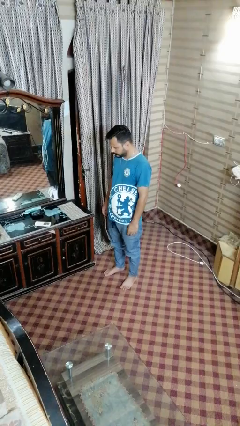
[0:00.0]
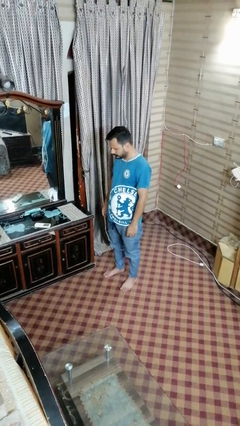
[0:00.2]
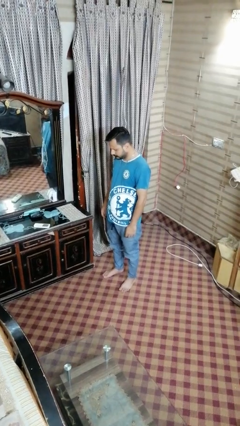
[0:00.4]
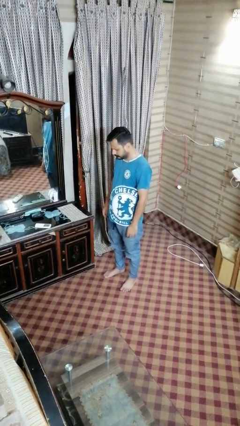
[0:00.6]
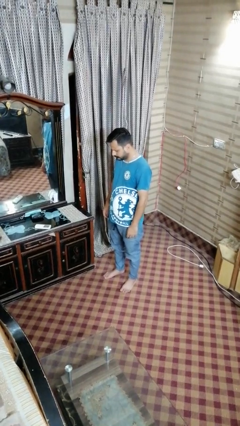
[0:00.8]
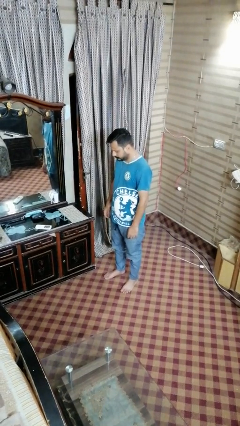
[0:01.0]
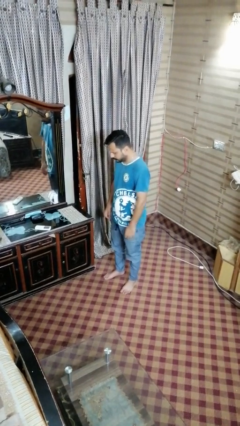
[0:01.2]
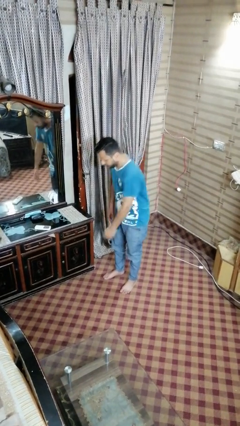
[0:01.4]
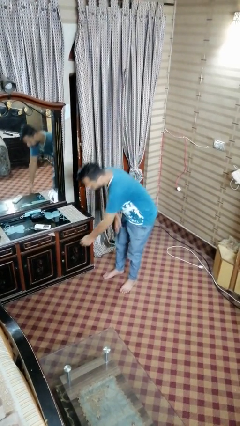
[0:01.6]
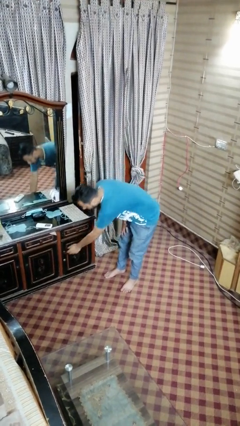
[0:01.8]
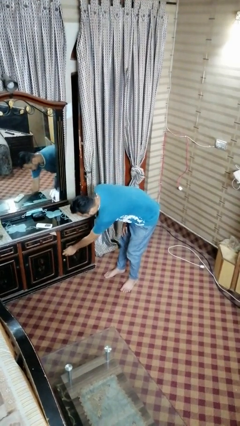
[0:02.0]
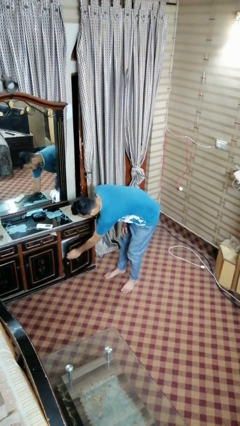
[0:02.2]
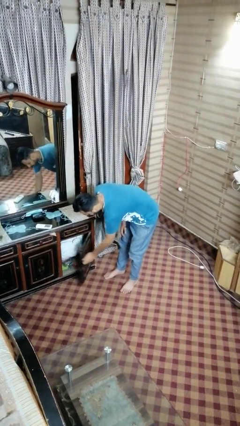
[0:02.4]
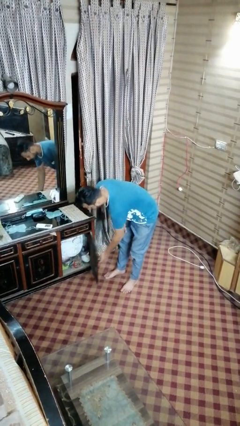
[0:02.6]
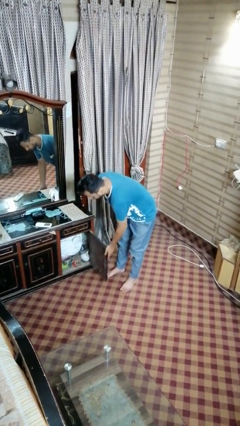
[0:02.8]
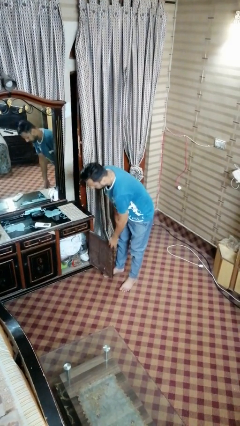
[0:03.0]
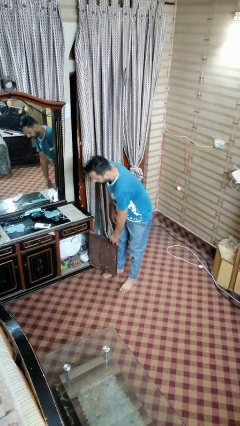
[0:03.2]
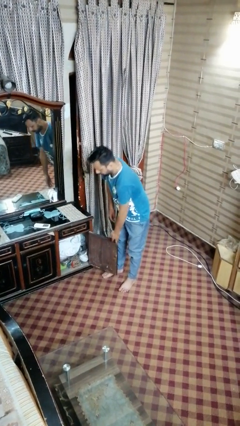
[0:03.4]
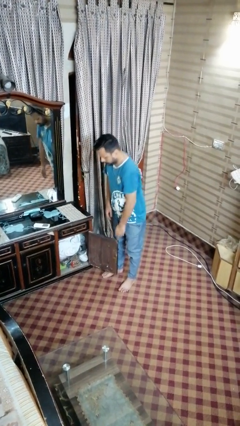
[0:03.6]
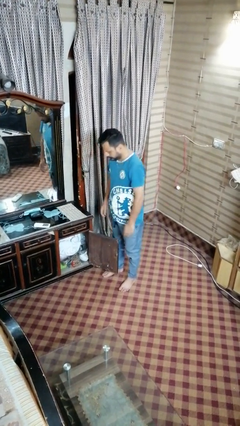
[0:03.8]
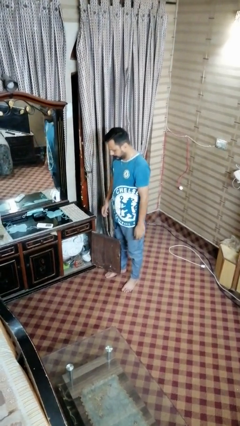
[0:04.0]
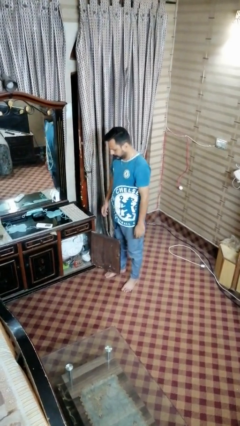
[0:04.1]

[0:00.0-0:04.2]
person opens dresser drawer

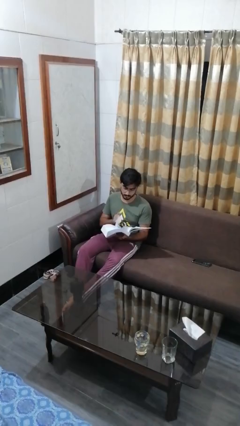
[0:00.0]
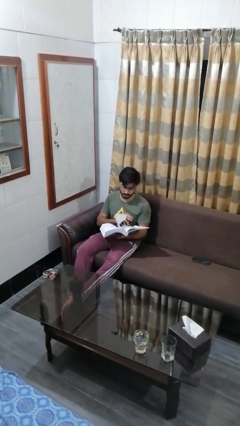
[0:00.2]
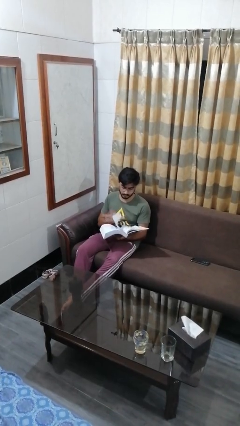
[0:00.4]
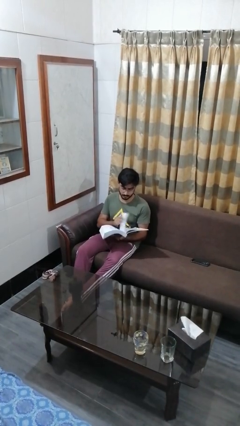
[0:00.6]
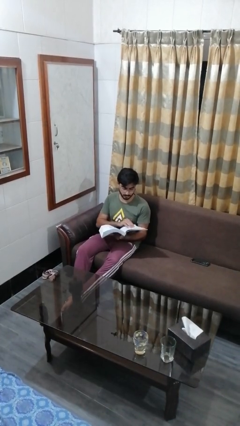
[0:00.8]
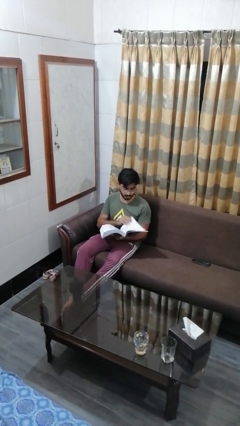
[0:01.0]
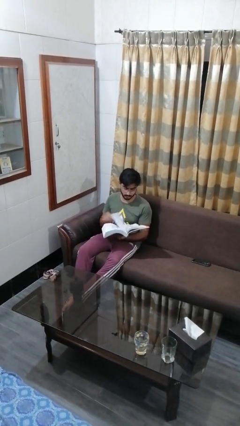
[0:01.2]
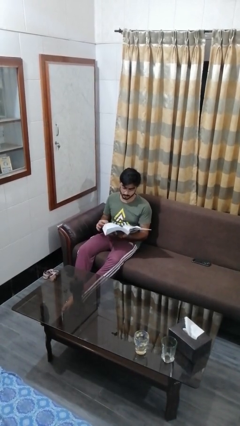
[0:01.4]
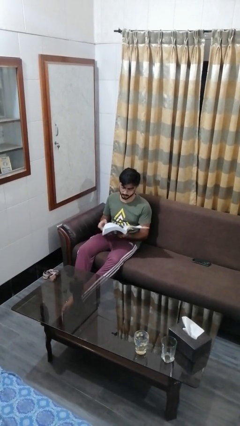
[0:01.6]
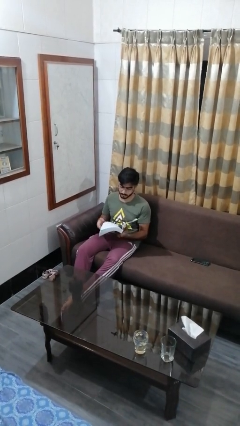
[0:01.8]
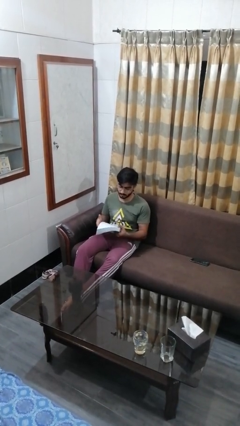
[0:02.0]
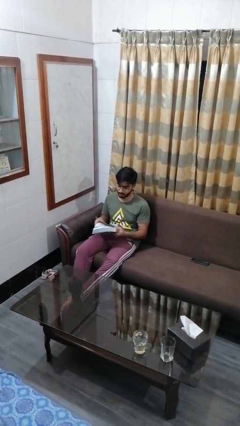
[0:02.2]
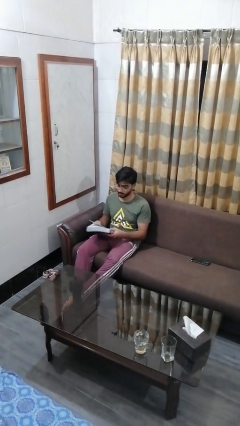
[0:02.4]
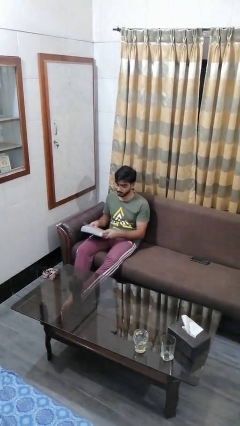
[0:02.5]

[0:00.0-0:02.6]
person reads book

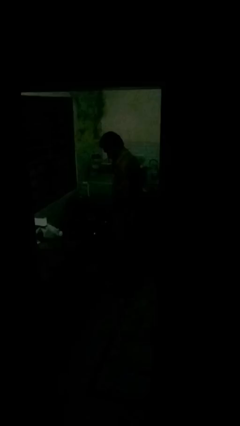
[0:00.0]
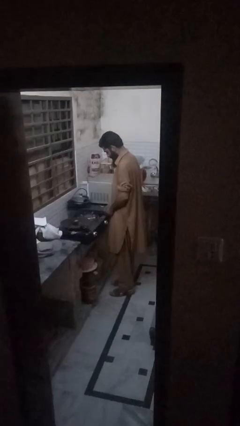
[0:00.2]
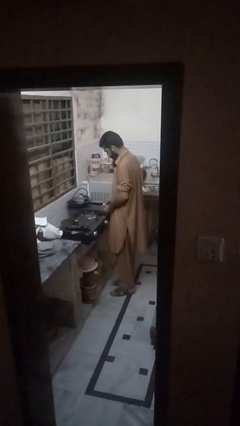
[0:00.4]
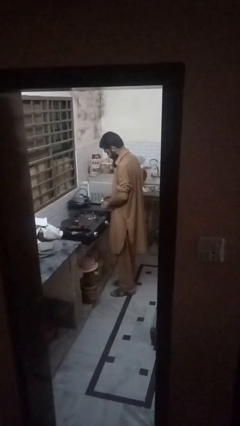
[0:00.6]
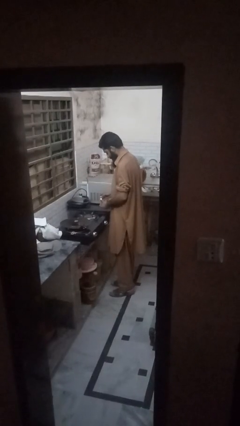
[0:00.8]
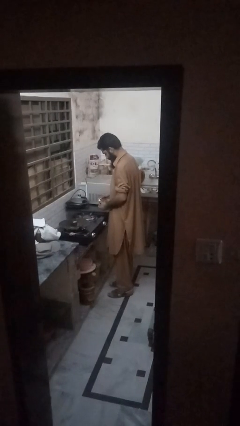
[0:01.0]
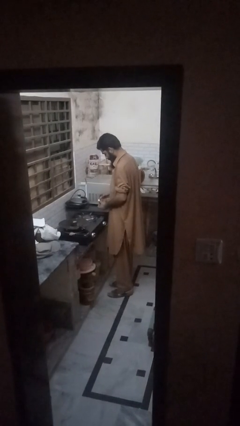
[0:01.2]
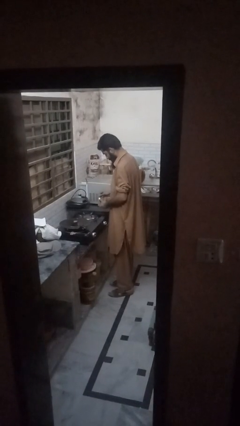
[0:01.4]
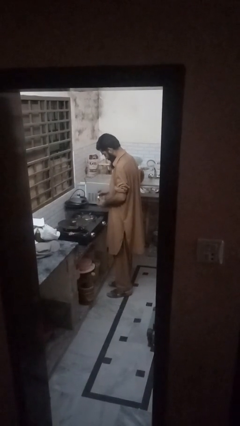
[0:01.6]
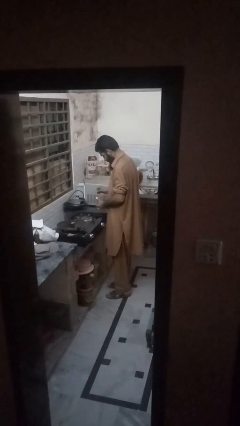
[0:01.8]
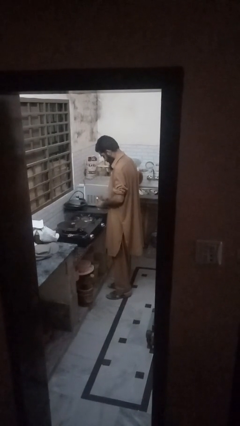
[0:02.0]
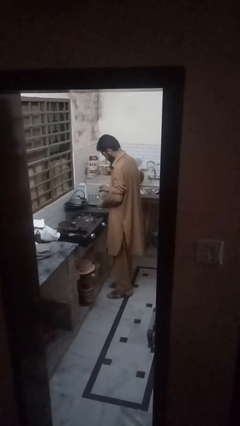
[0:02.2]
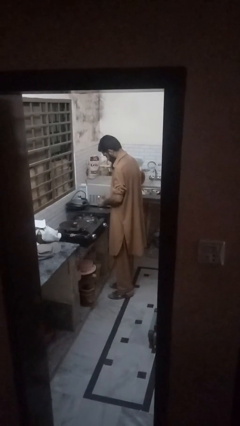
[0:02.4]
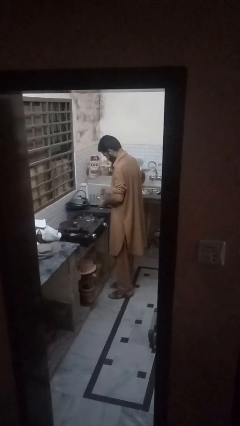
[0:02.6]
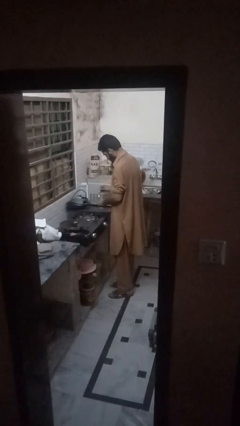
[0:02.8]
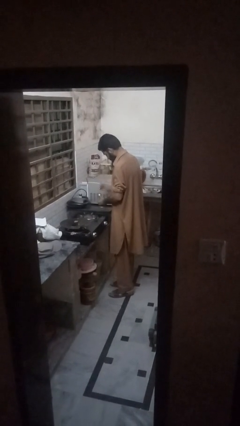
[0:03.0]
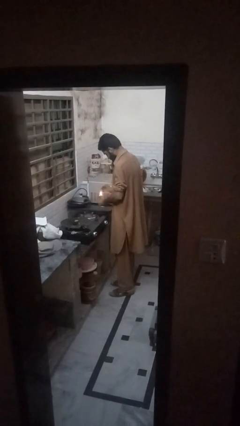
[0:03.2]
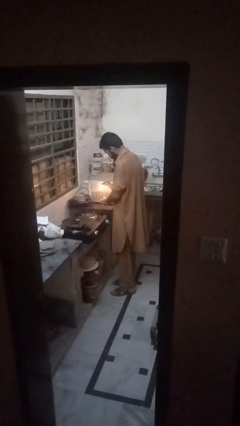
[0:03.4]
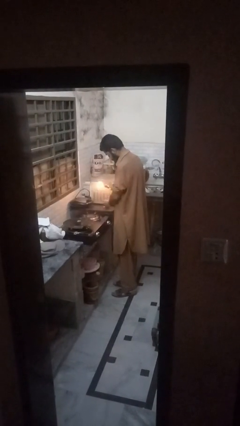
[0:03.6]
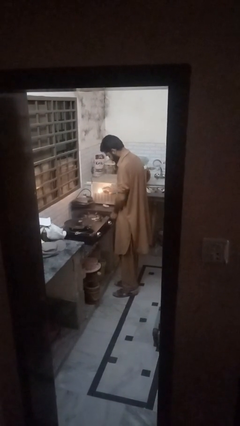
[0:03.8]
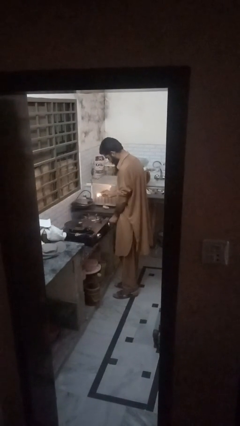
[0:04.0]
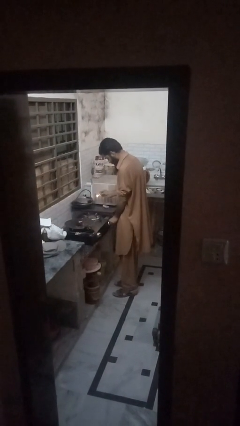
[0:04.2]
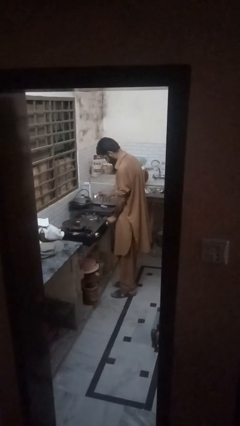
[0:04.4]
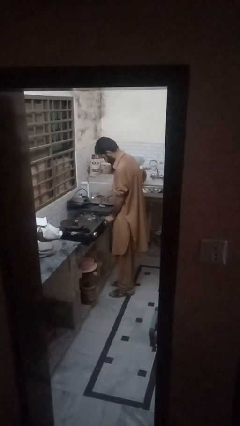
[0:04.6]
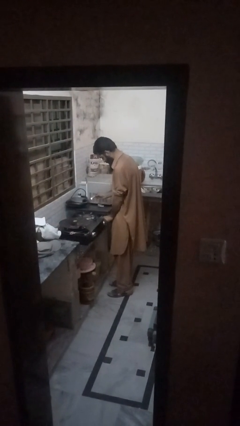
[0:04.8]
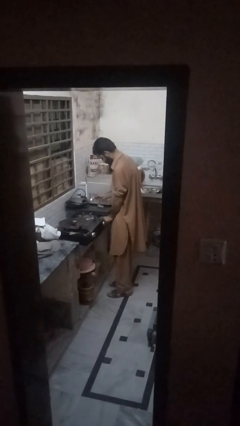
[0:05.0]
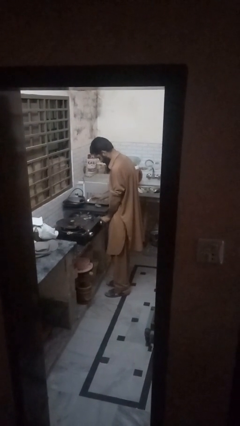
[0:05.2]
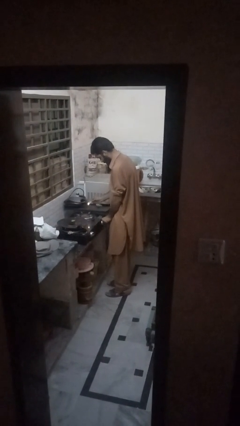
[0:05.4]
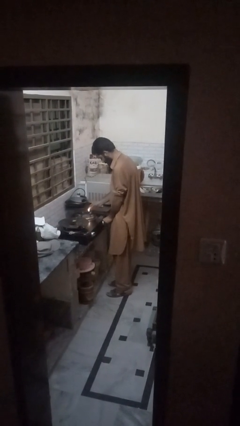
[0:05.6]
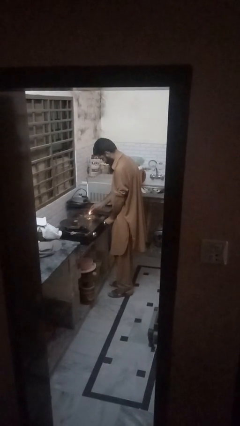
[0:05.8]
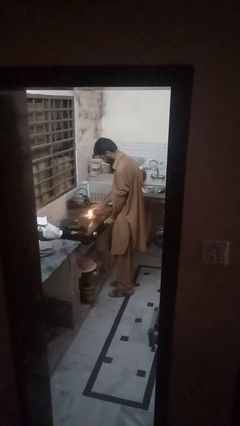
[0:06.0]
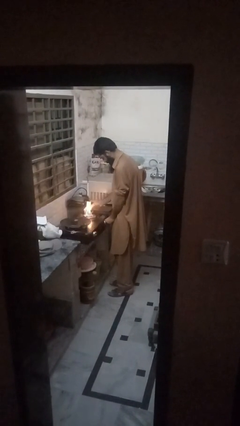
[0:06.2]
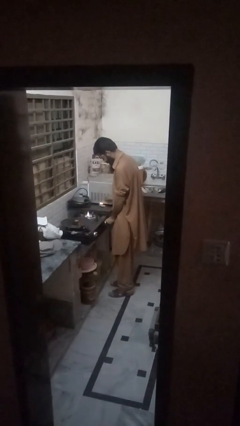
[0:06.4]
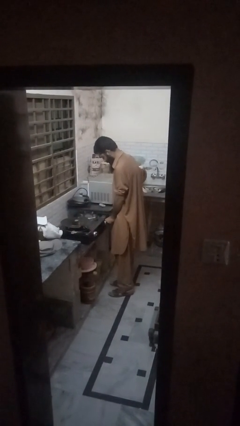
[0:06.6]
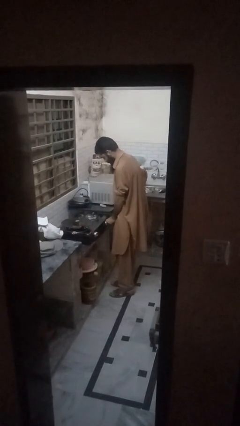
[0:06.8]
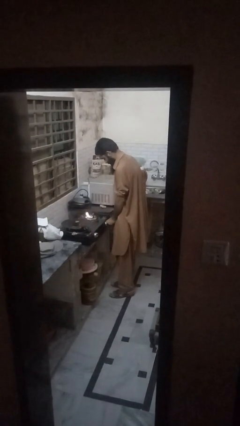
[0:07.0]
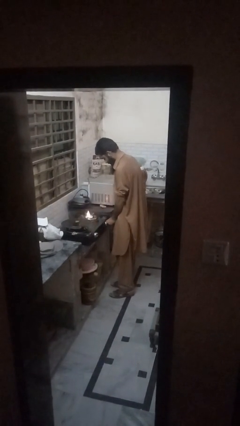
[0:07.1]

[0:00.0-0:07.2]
person turns on stovetop

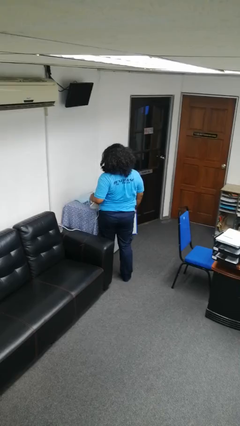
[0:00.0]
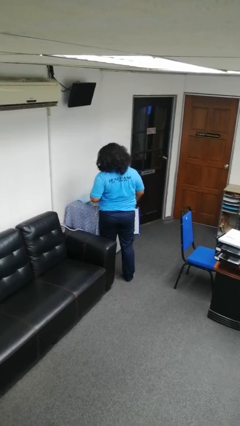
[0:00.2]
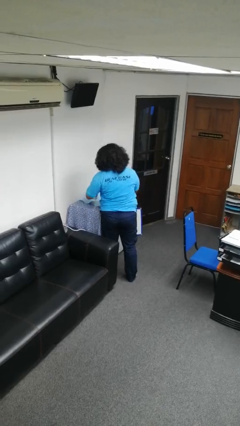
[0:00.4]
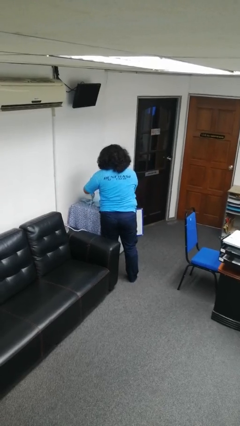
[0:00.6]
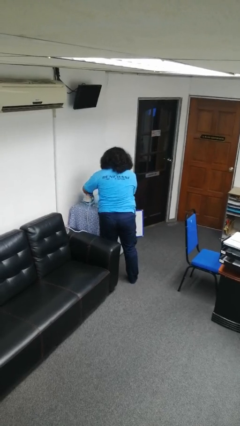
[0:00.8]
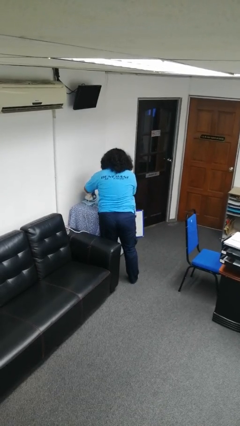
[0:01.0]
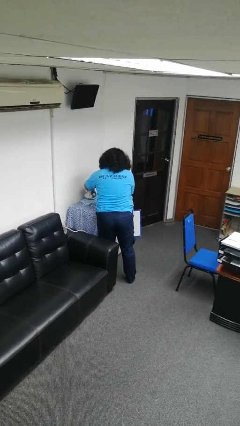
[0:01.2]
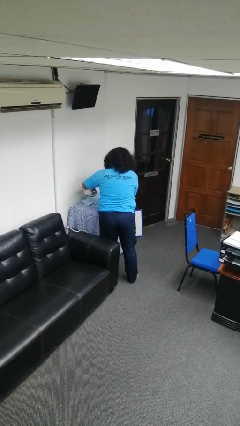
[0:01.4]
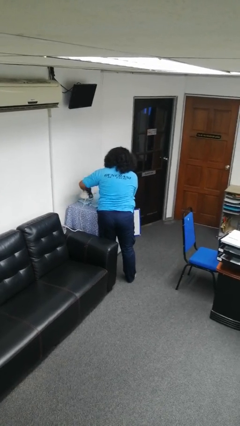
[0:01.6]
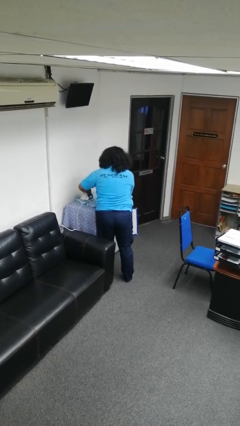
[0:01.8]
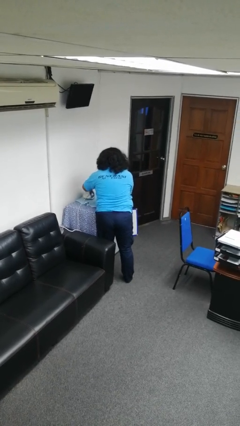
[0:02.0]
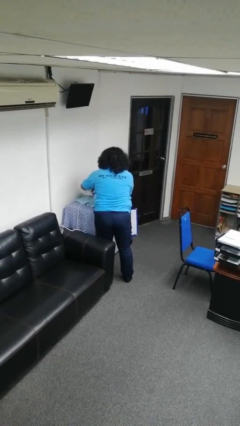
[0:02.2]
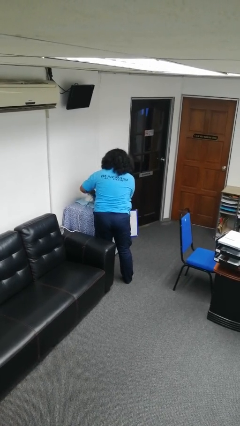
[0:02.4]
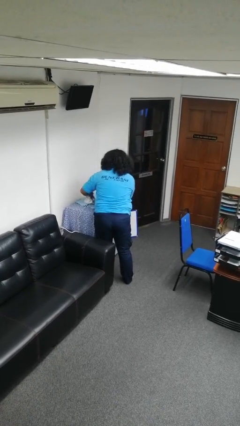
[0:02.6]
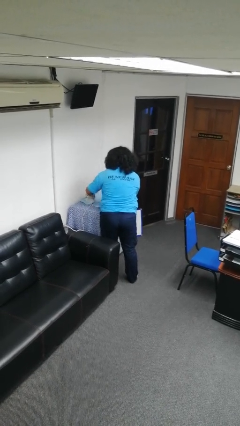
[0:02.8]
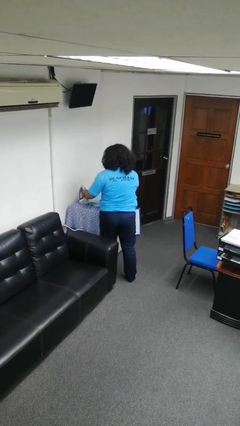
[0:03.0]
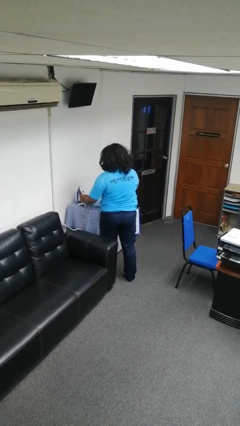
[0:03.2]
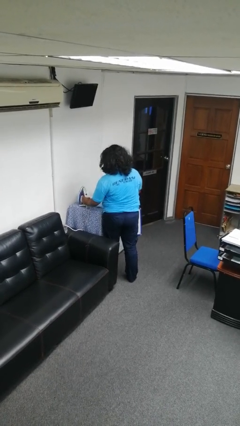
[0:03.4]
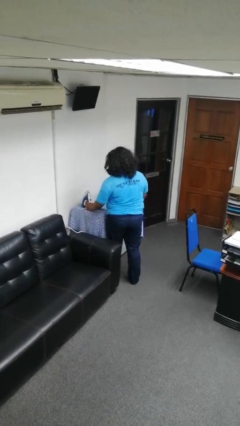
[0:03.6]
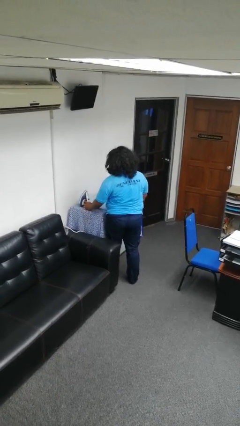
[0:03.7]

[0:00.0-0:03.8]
person irons clothes
